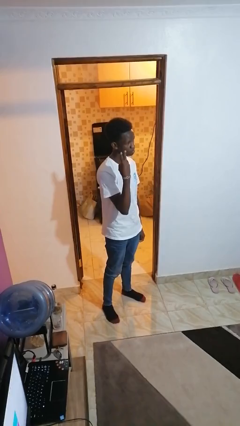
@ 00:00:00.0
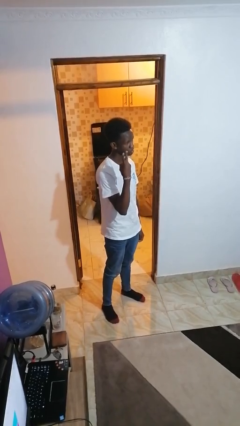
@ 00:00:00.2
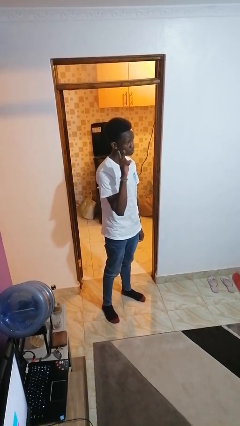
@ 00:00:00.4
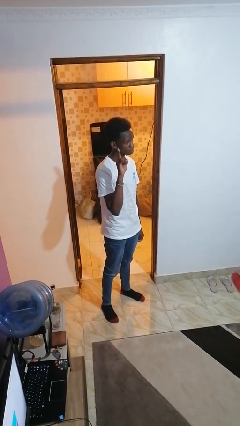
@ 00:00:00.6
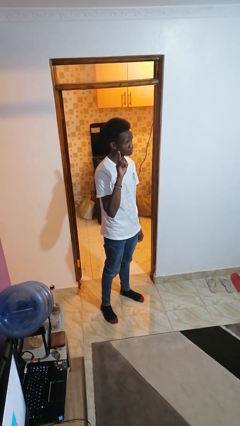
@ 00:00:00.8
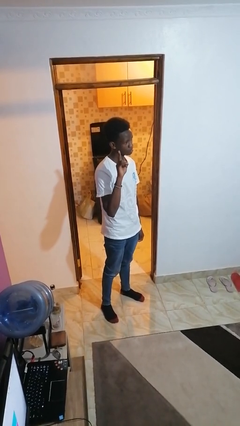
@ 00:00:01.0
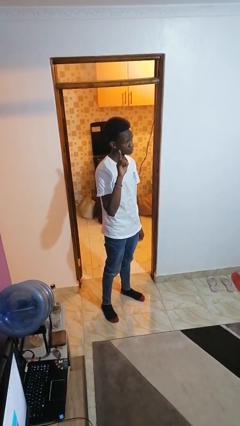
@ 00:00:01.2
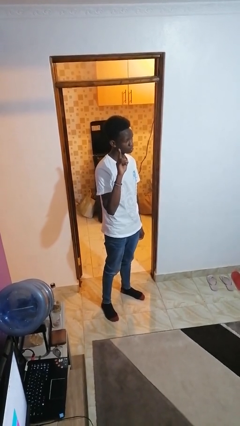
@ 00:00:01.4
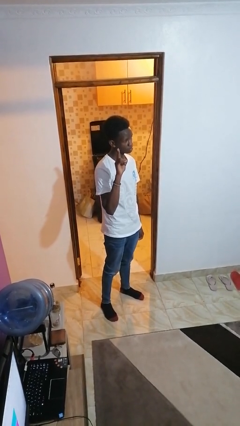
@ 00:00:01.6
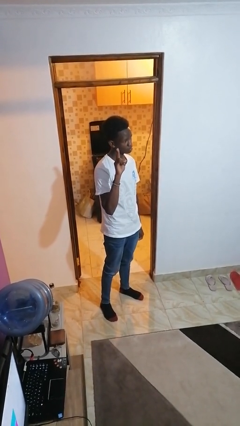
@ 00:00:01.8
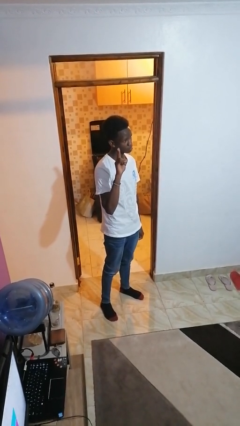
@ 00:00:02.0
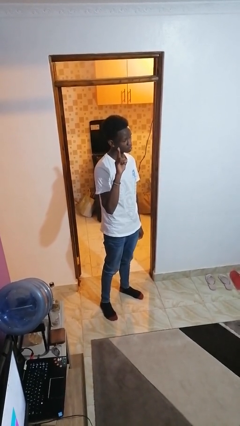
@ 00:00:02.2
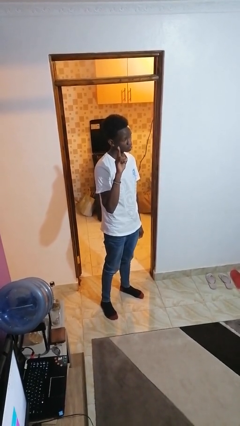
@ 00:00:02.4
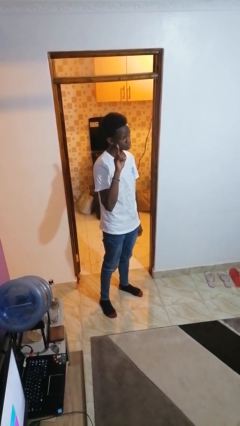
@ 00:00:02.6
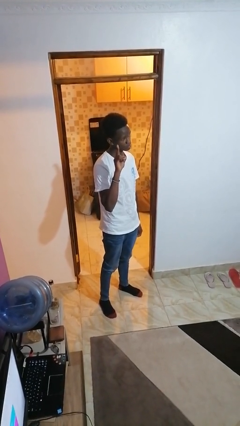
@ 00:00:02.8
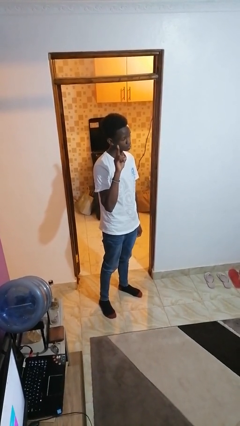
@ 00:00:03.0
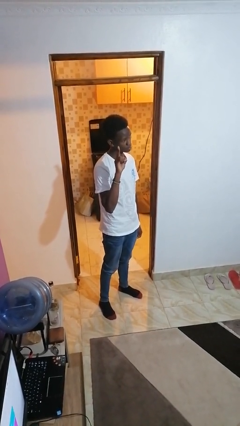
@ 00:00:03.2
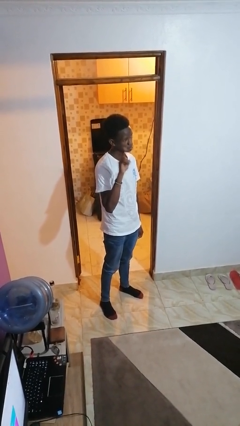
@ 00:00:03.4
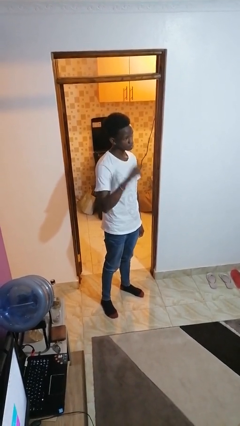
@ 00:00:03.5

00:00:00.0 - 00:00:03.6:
person gestures peace

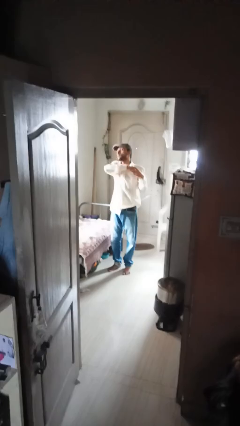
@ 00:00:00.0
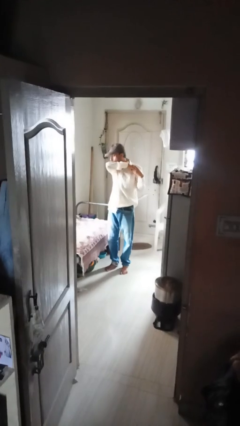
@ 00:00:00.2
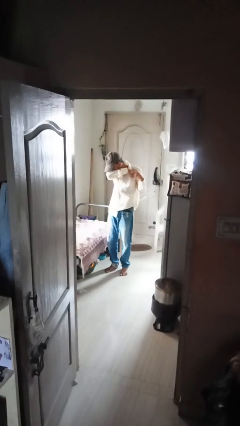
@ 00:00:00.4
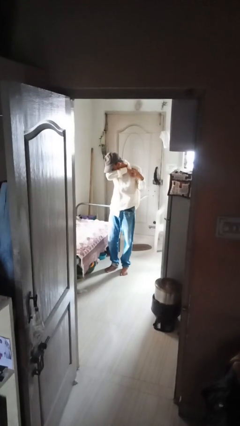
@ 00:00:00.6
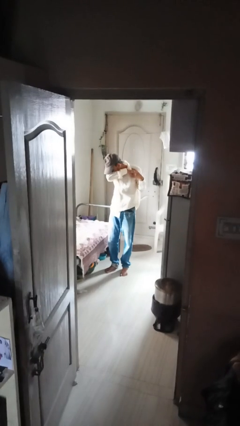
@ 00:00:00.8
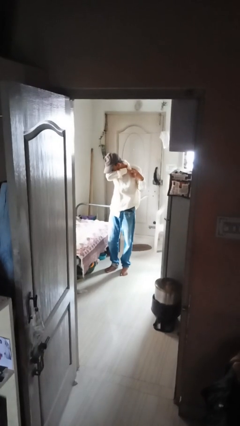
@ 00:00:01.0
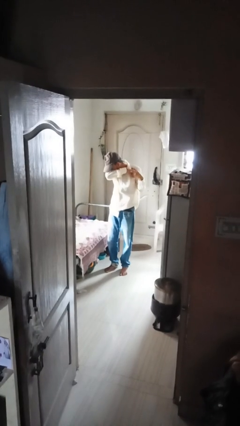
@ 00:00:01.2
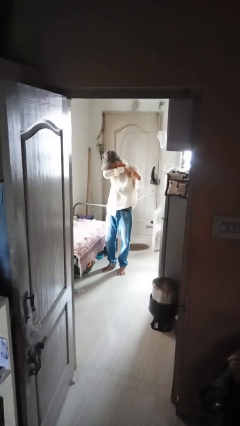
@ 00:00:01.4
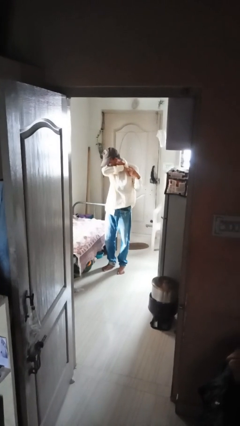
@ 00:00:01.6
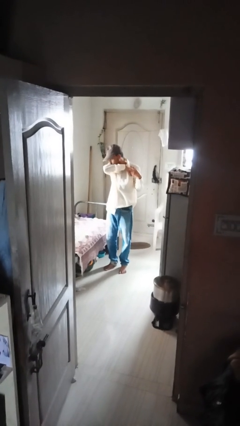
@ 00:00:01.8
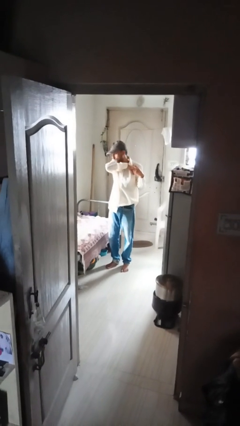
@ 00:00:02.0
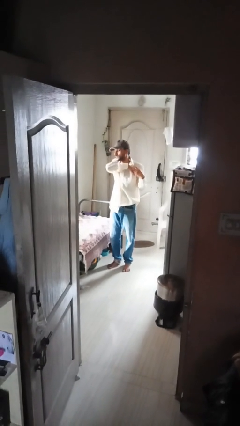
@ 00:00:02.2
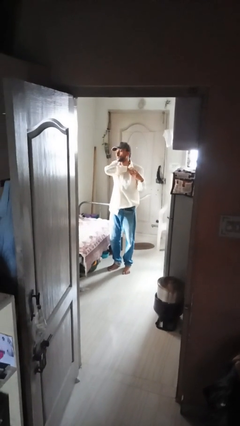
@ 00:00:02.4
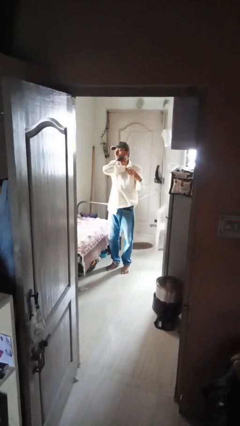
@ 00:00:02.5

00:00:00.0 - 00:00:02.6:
person sneezes into arm

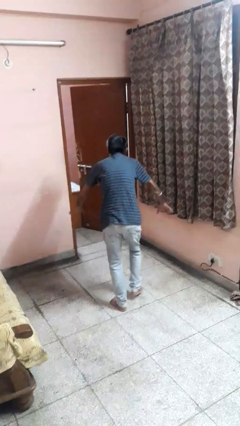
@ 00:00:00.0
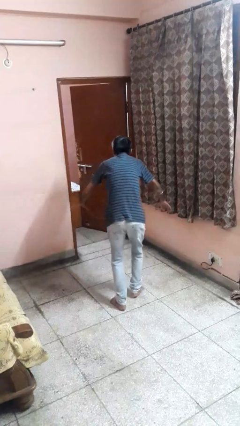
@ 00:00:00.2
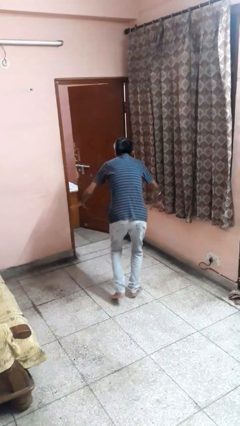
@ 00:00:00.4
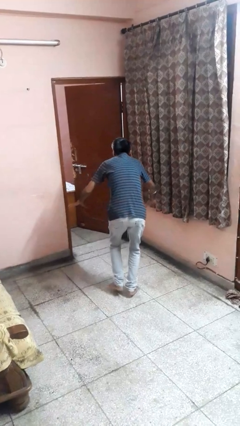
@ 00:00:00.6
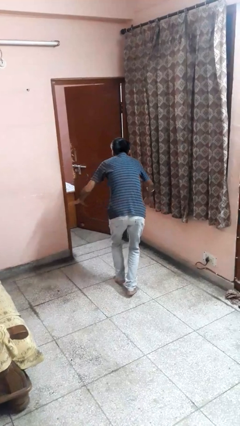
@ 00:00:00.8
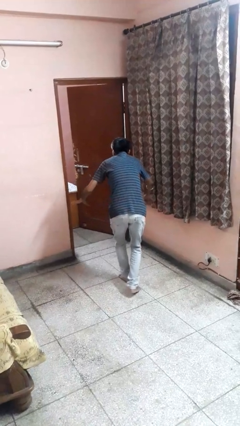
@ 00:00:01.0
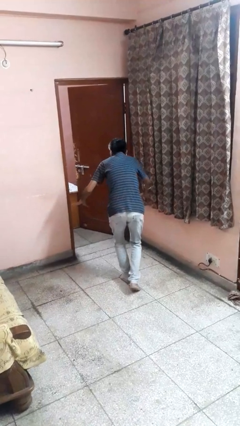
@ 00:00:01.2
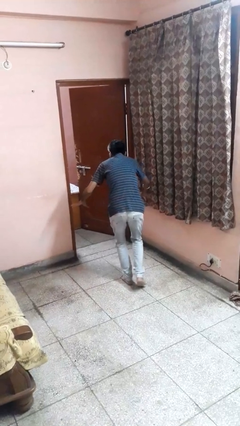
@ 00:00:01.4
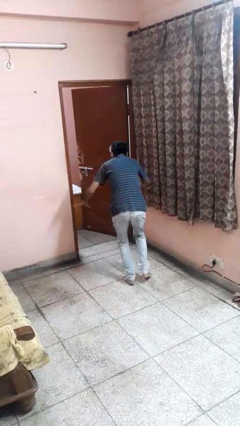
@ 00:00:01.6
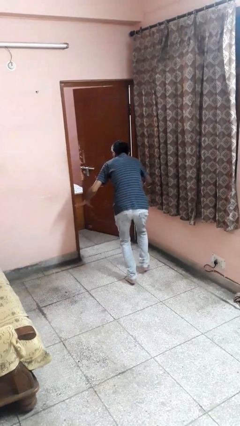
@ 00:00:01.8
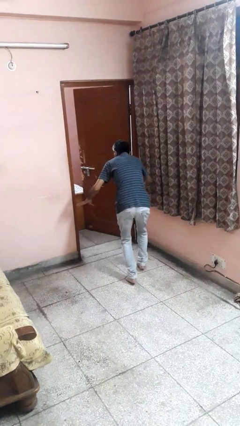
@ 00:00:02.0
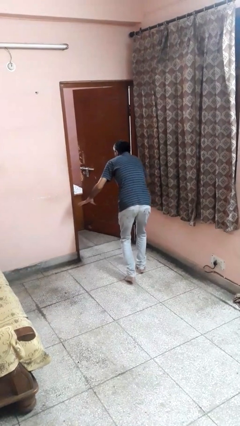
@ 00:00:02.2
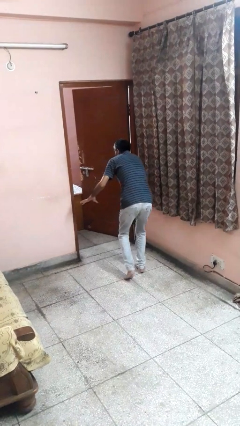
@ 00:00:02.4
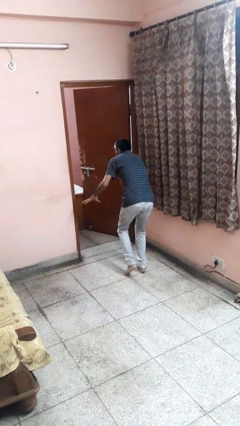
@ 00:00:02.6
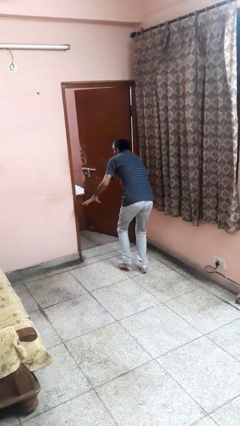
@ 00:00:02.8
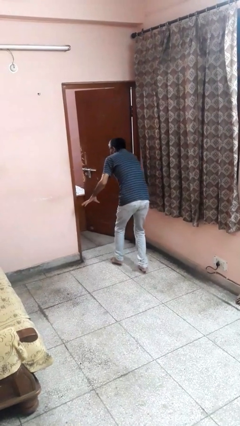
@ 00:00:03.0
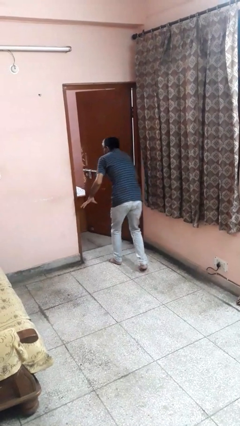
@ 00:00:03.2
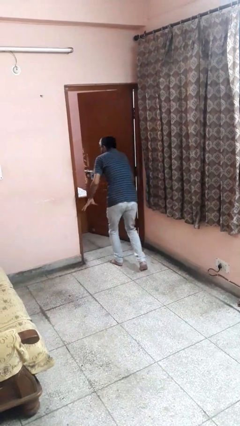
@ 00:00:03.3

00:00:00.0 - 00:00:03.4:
person walks tiptoe

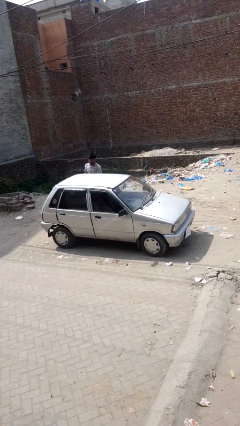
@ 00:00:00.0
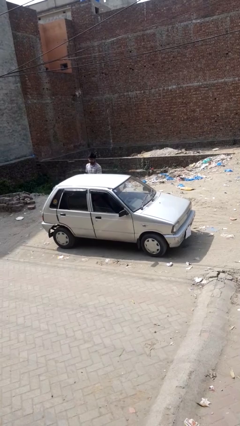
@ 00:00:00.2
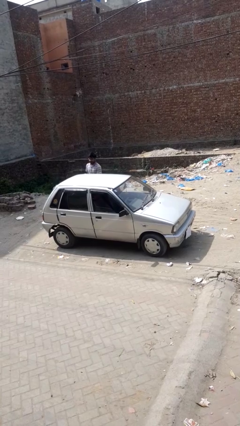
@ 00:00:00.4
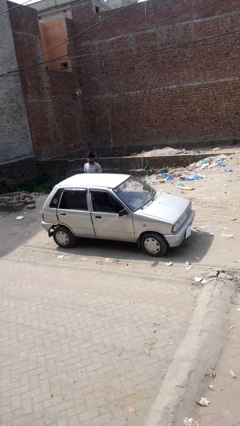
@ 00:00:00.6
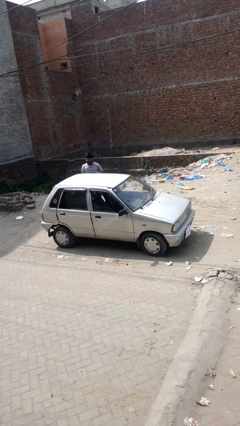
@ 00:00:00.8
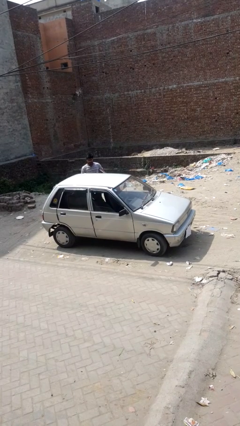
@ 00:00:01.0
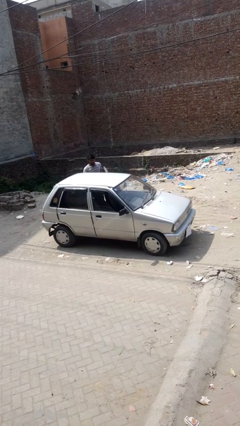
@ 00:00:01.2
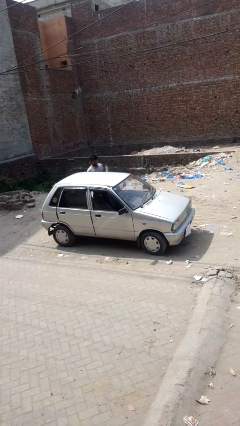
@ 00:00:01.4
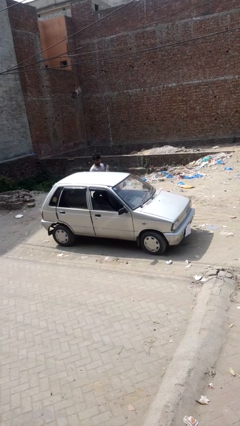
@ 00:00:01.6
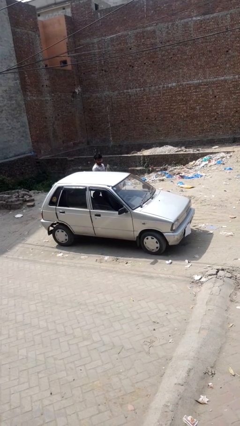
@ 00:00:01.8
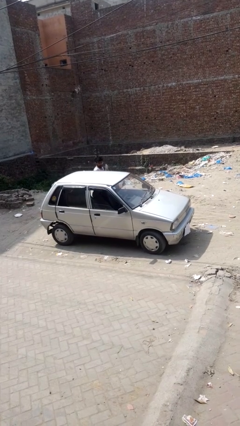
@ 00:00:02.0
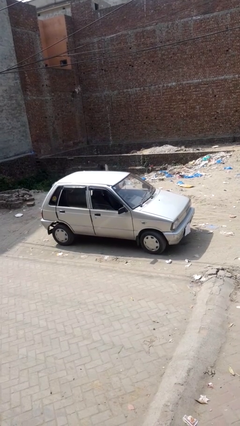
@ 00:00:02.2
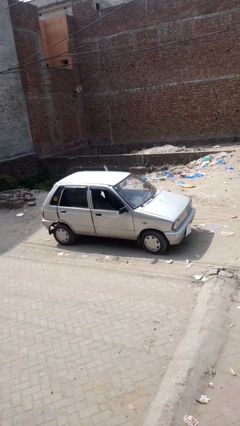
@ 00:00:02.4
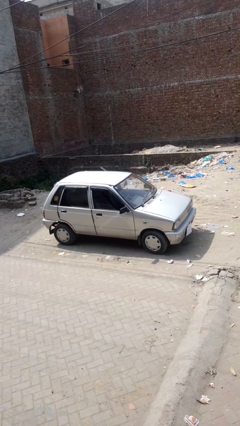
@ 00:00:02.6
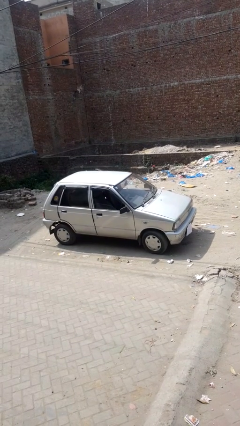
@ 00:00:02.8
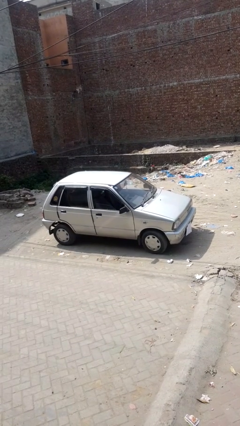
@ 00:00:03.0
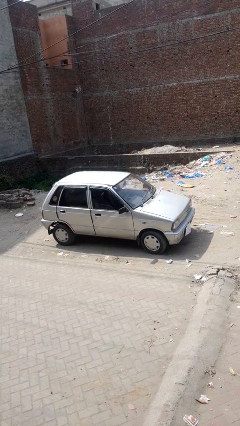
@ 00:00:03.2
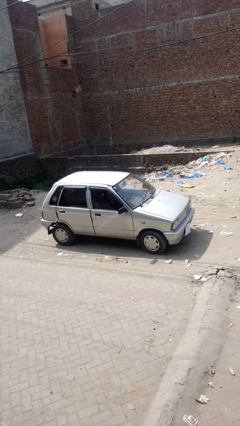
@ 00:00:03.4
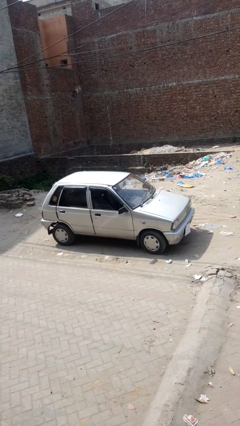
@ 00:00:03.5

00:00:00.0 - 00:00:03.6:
car picks up person

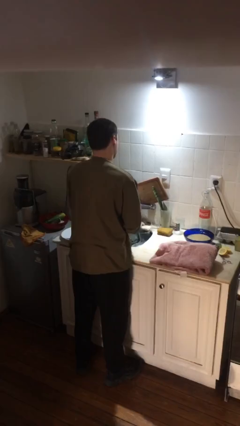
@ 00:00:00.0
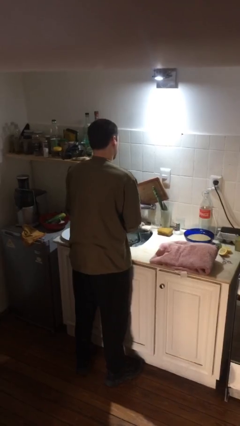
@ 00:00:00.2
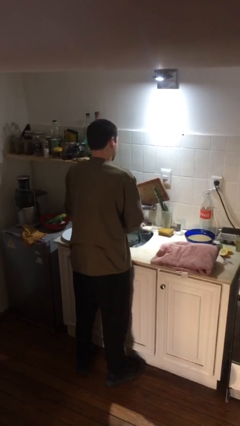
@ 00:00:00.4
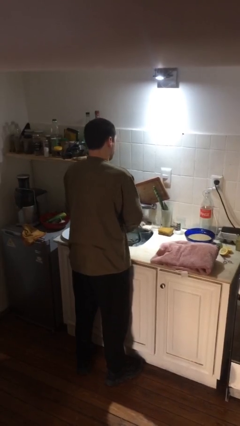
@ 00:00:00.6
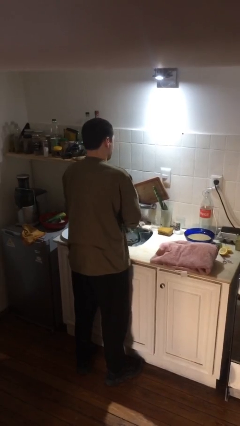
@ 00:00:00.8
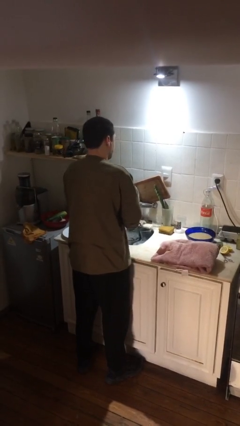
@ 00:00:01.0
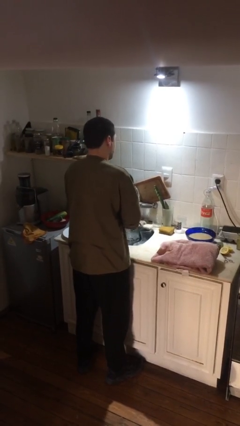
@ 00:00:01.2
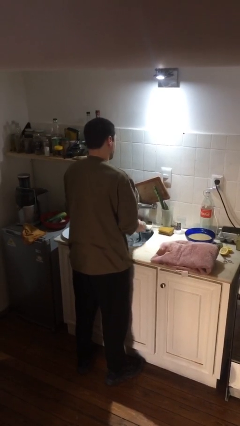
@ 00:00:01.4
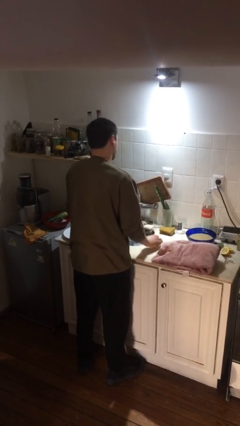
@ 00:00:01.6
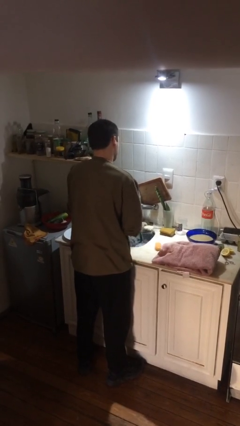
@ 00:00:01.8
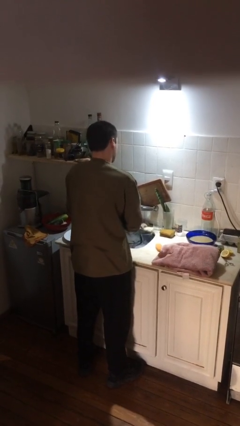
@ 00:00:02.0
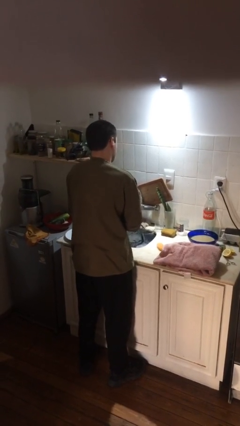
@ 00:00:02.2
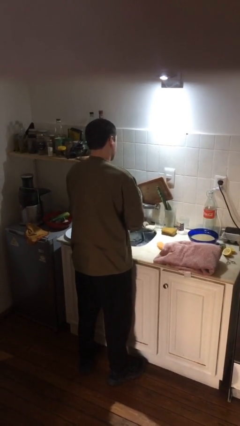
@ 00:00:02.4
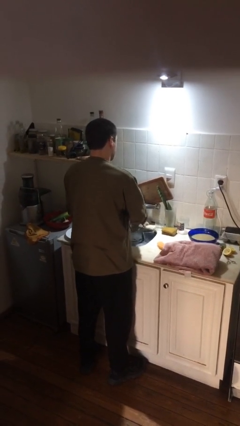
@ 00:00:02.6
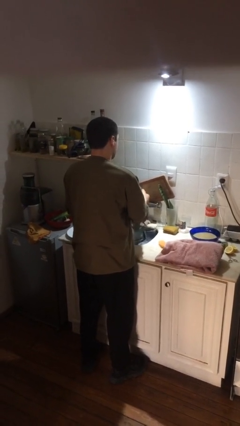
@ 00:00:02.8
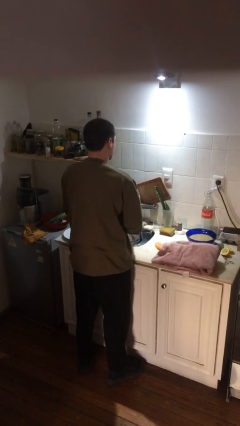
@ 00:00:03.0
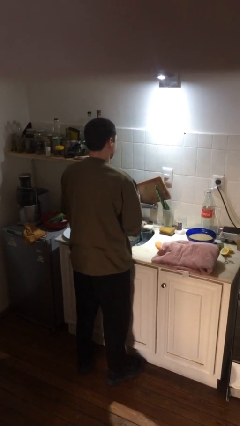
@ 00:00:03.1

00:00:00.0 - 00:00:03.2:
person washes hands

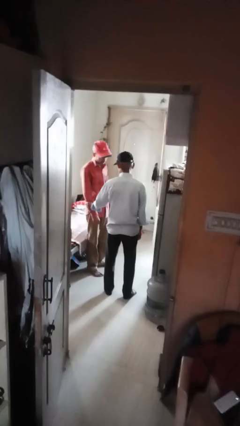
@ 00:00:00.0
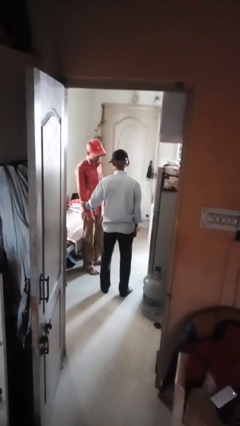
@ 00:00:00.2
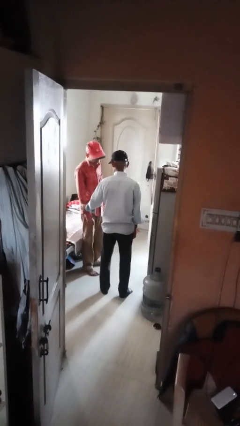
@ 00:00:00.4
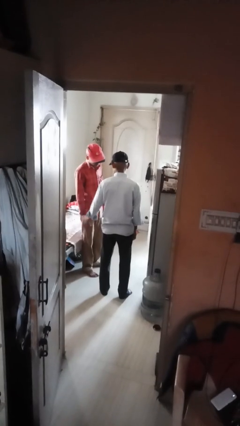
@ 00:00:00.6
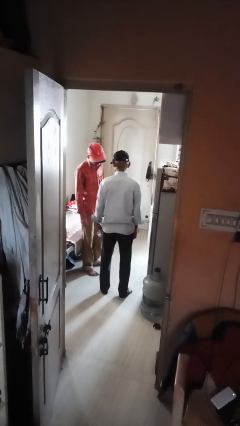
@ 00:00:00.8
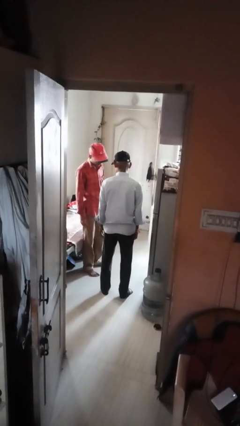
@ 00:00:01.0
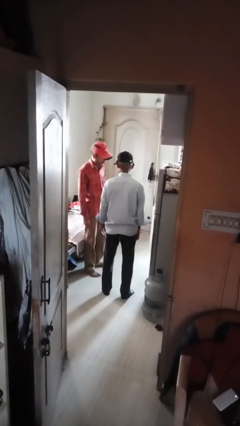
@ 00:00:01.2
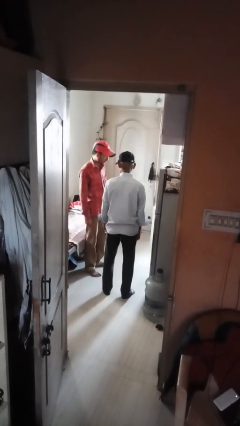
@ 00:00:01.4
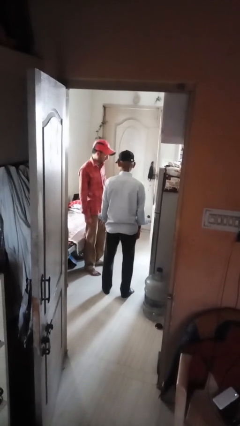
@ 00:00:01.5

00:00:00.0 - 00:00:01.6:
person grabs person by forearm
